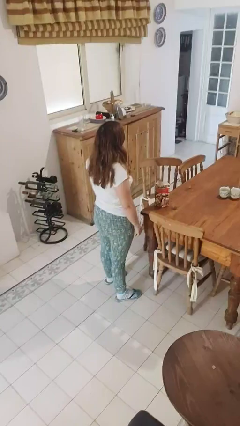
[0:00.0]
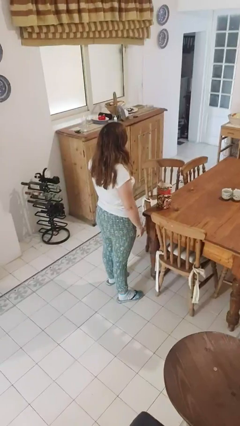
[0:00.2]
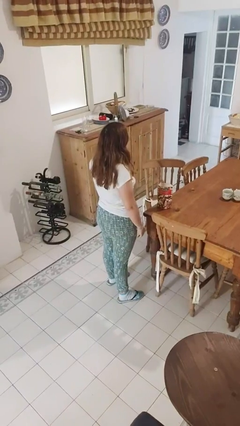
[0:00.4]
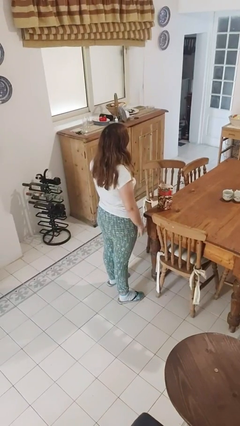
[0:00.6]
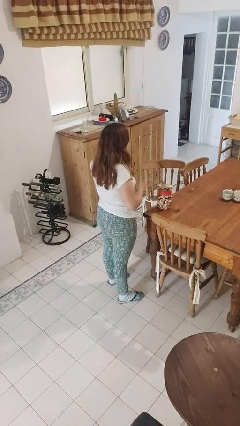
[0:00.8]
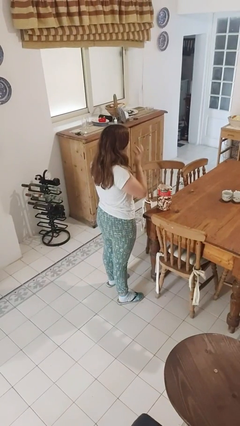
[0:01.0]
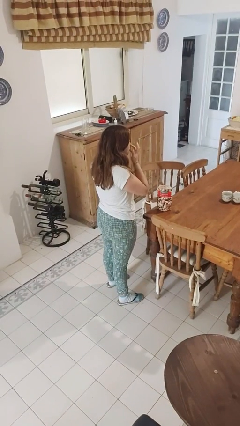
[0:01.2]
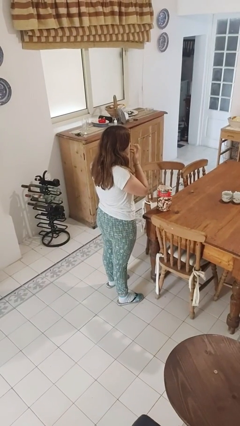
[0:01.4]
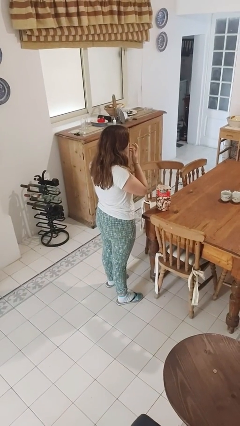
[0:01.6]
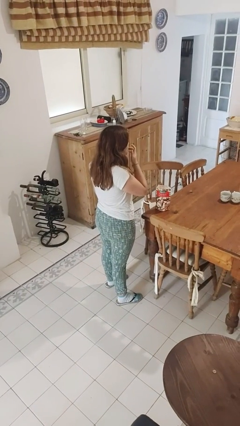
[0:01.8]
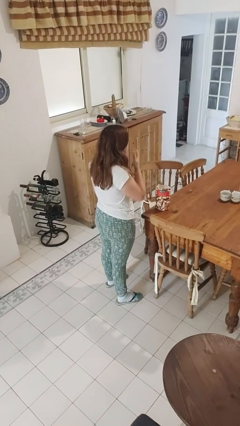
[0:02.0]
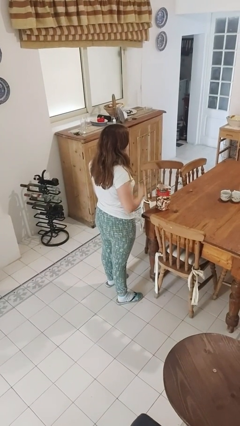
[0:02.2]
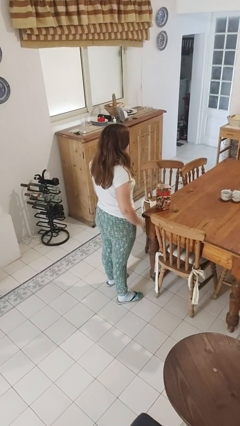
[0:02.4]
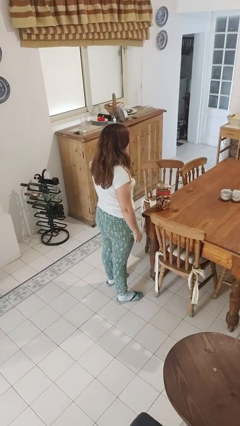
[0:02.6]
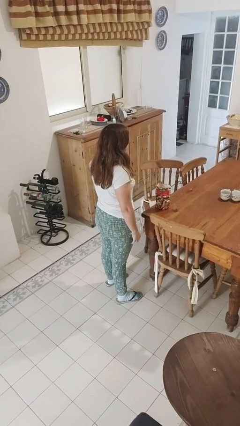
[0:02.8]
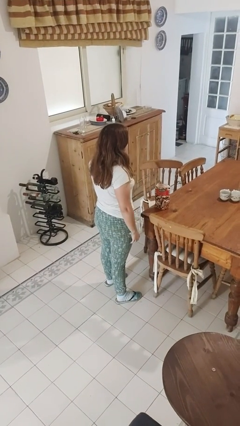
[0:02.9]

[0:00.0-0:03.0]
person licks fingers

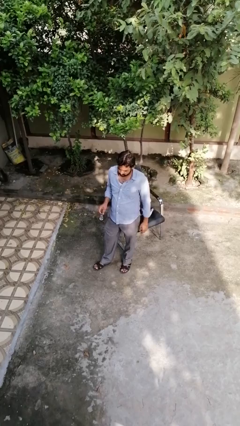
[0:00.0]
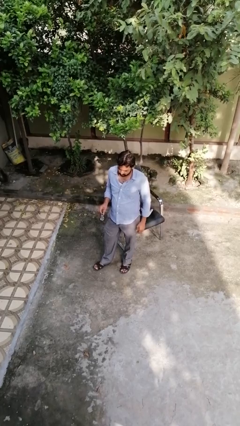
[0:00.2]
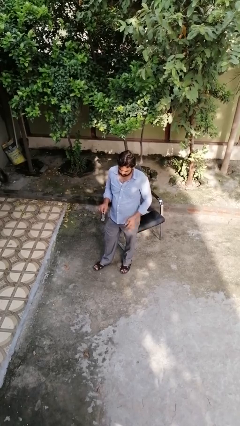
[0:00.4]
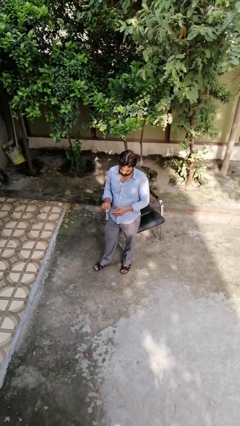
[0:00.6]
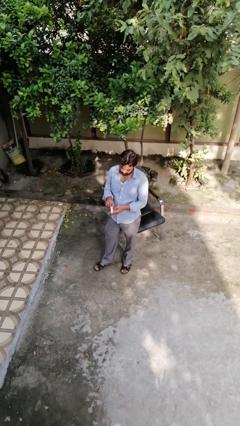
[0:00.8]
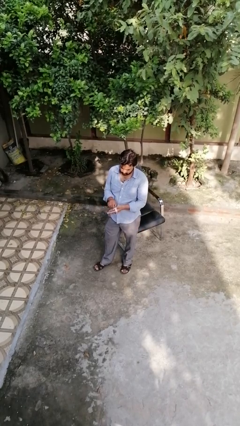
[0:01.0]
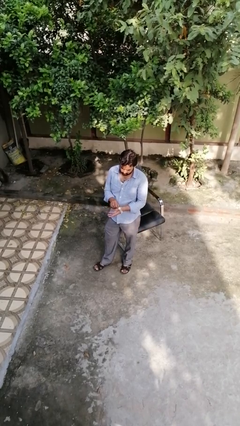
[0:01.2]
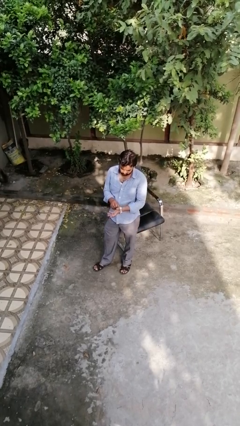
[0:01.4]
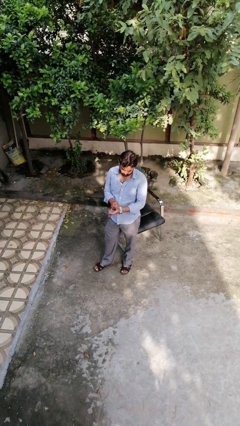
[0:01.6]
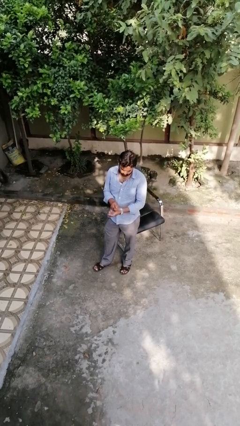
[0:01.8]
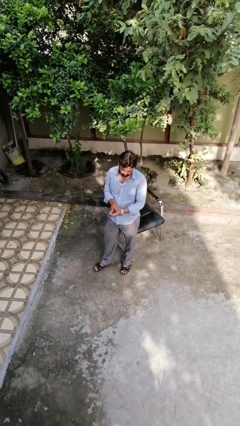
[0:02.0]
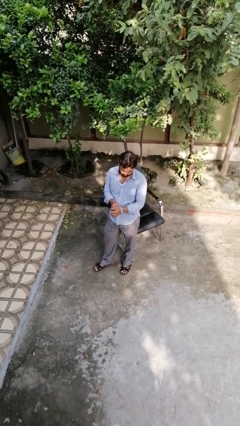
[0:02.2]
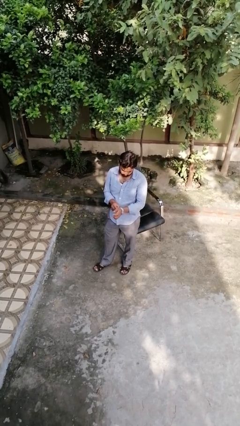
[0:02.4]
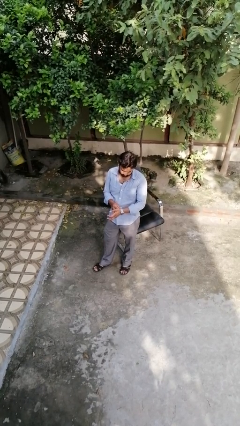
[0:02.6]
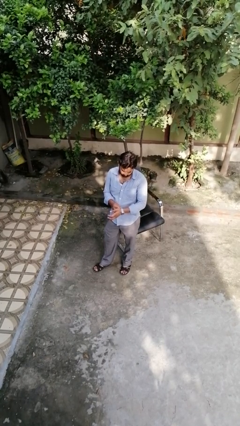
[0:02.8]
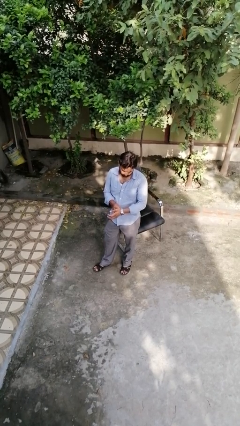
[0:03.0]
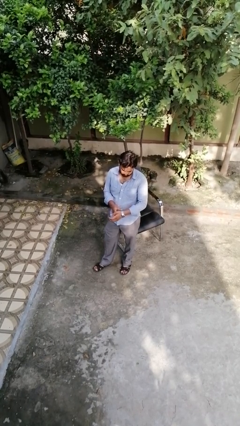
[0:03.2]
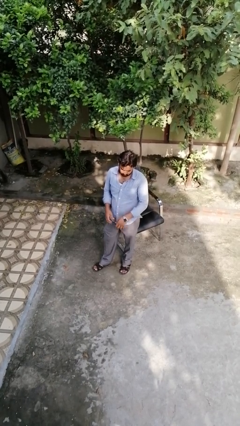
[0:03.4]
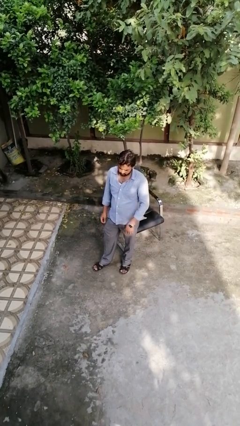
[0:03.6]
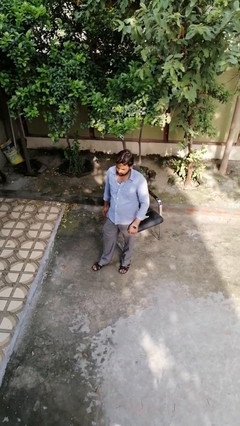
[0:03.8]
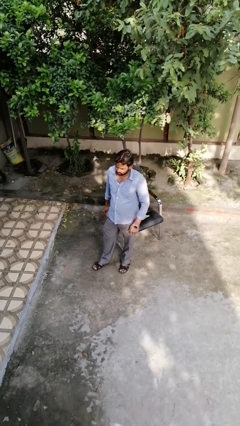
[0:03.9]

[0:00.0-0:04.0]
person puts on wristwatch

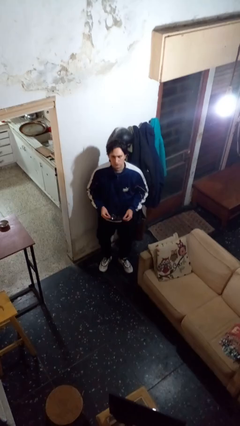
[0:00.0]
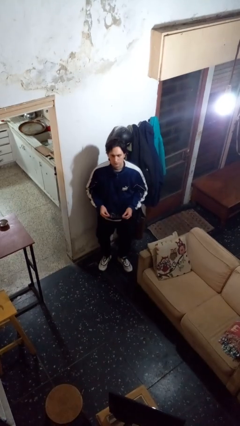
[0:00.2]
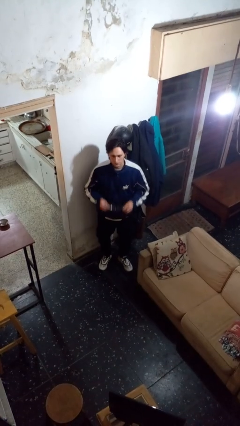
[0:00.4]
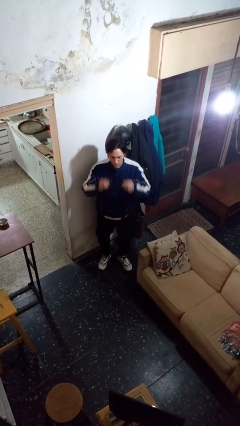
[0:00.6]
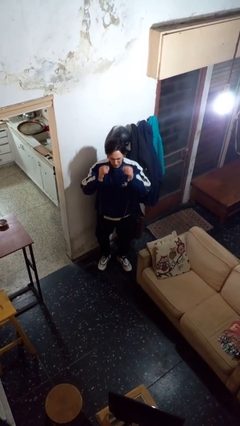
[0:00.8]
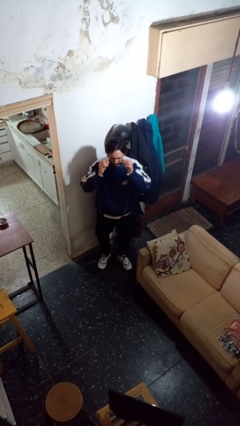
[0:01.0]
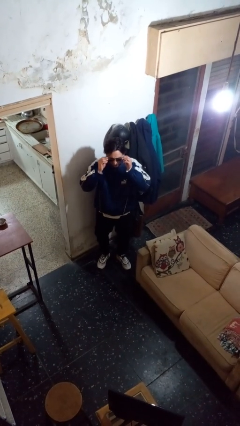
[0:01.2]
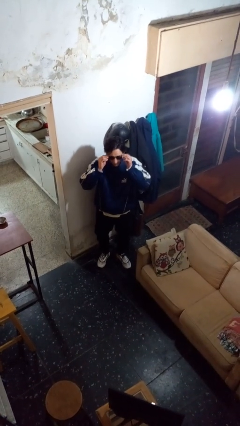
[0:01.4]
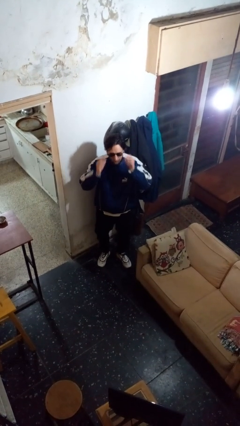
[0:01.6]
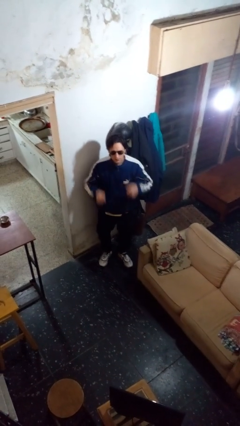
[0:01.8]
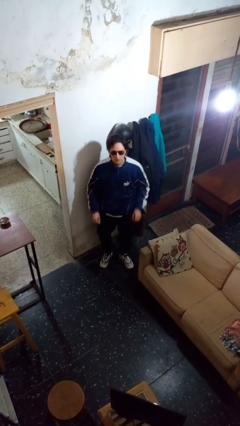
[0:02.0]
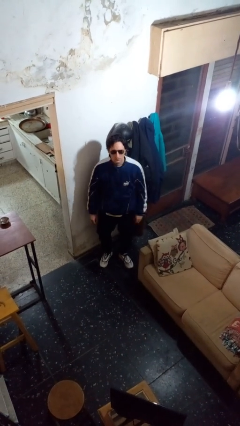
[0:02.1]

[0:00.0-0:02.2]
person puts on sunglasses

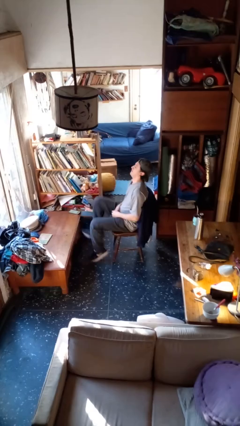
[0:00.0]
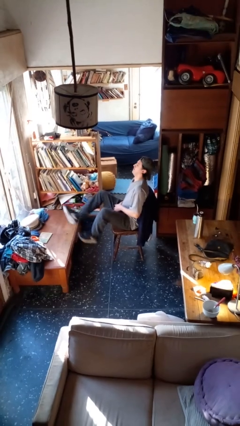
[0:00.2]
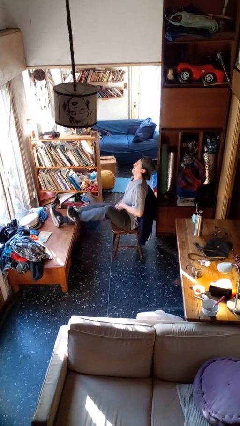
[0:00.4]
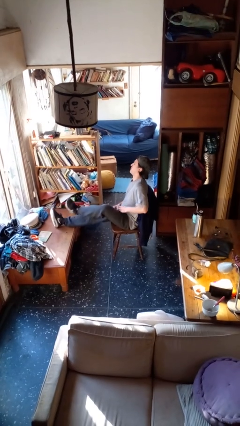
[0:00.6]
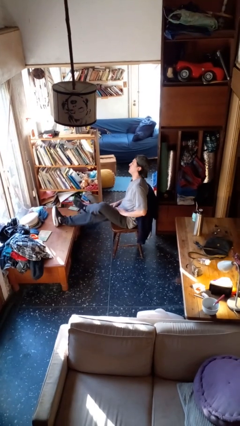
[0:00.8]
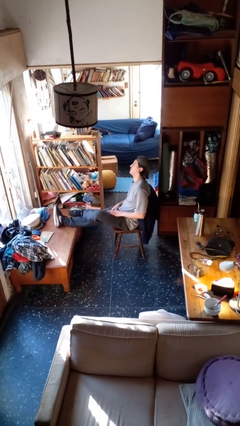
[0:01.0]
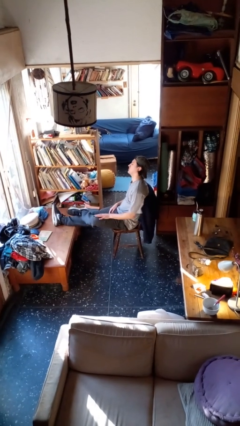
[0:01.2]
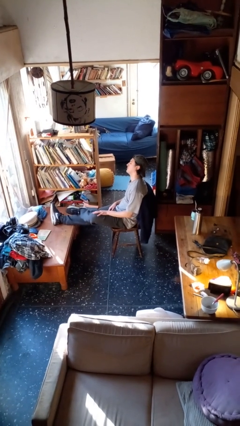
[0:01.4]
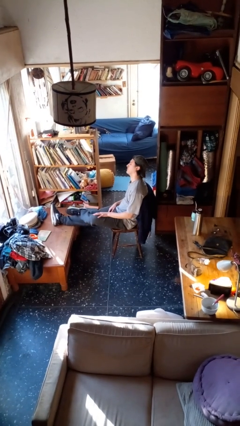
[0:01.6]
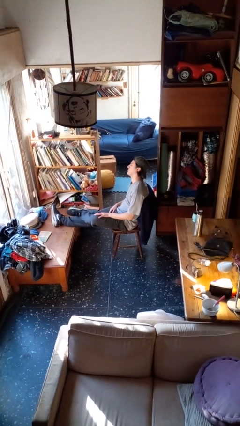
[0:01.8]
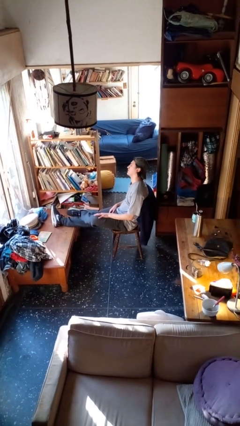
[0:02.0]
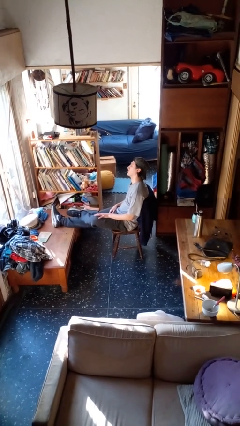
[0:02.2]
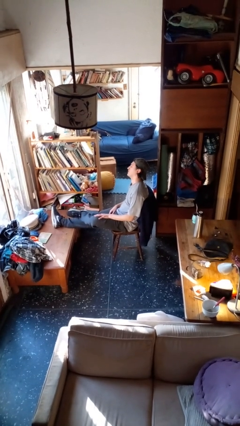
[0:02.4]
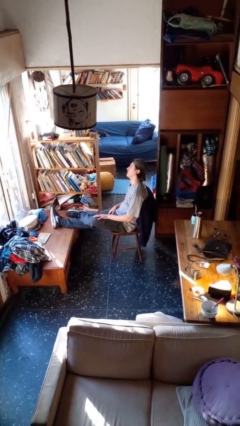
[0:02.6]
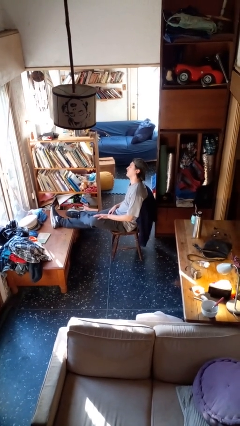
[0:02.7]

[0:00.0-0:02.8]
person puts feet up

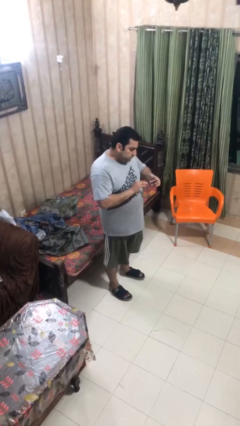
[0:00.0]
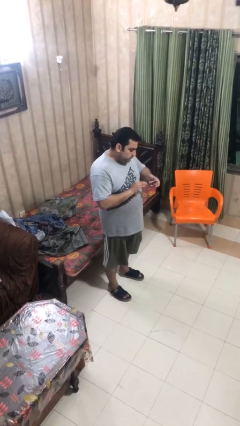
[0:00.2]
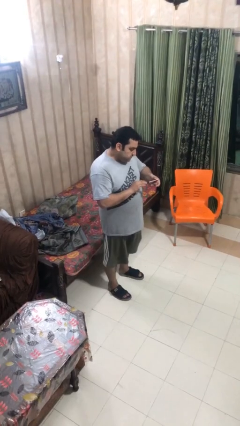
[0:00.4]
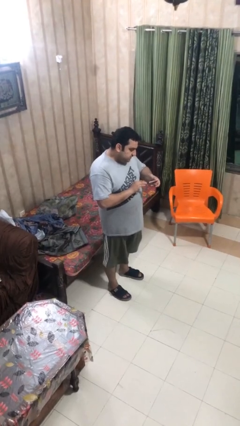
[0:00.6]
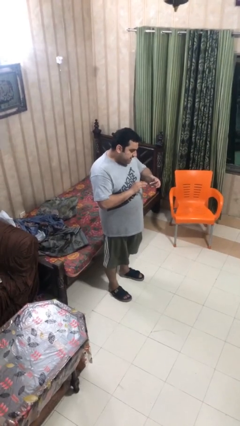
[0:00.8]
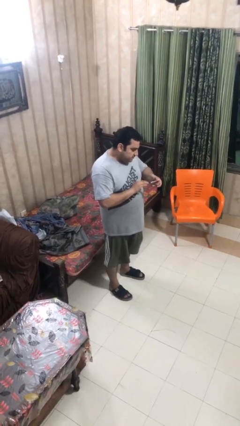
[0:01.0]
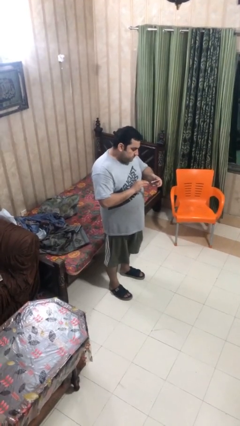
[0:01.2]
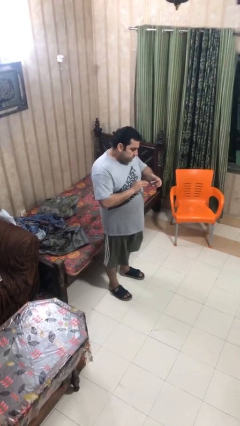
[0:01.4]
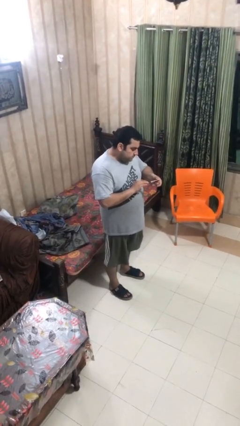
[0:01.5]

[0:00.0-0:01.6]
person clips fingernails

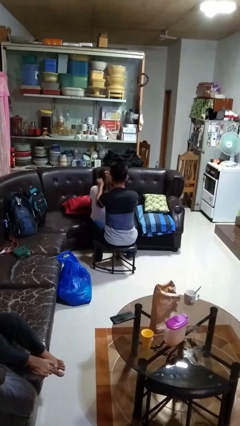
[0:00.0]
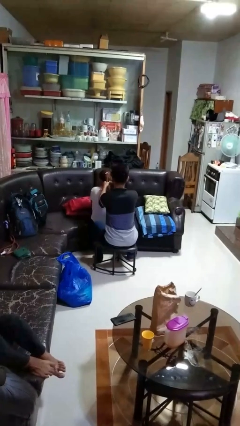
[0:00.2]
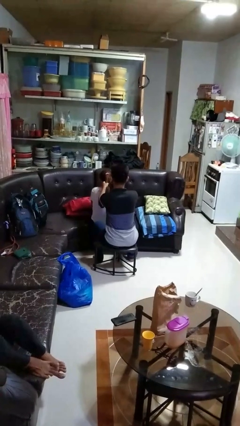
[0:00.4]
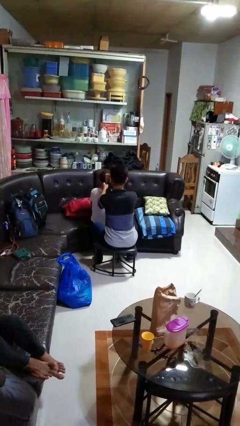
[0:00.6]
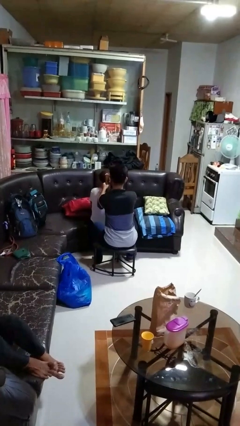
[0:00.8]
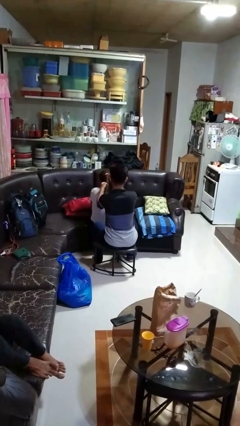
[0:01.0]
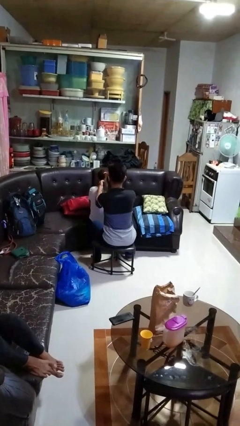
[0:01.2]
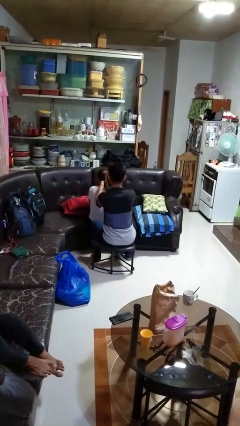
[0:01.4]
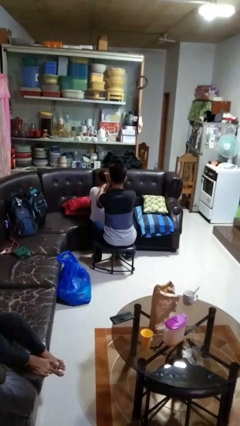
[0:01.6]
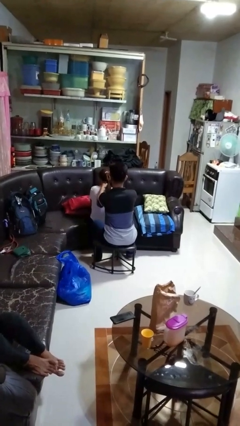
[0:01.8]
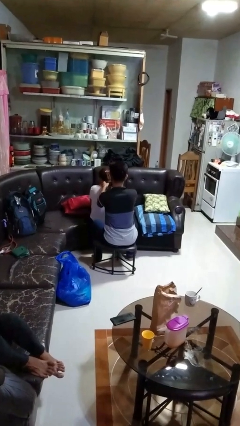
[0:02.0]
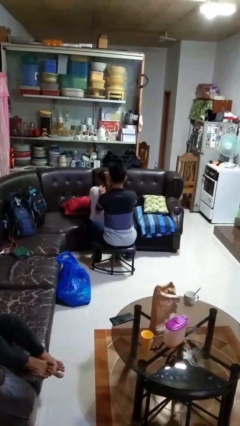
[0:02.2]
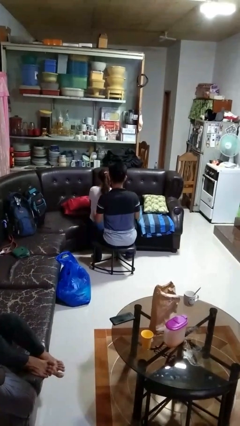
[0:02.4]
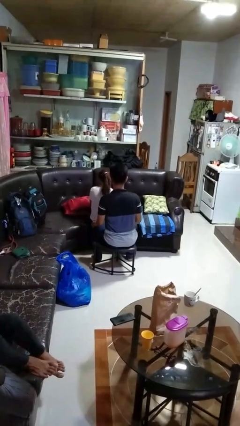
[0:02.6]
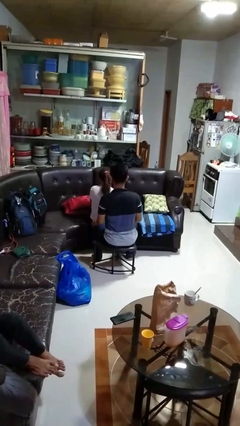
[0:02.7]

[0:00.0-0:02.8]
person braids hair of person

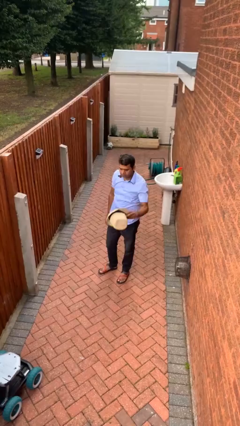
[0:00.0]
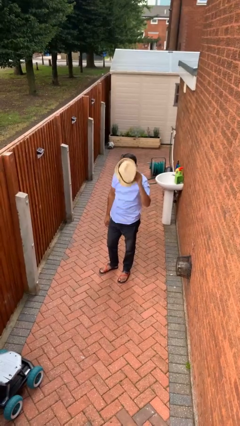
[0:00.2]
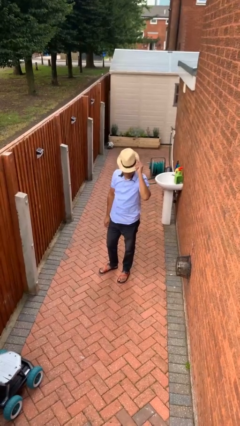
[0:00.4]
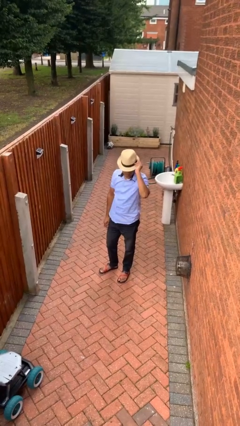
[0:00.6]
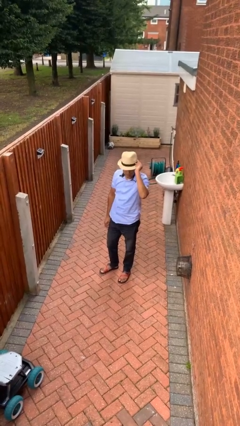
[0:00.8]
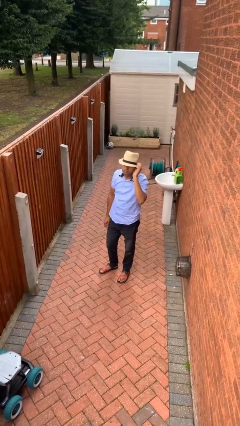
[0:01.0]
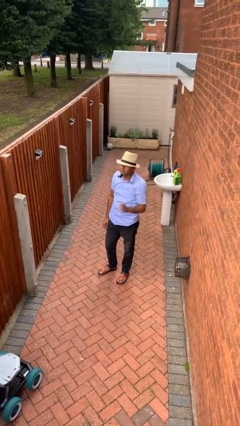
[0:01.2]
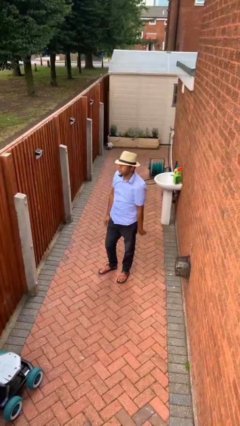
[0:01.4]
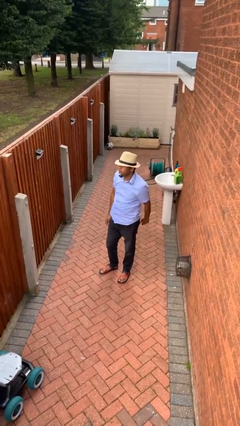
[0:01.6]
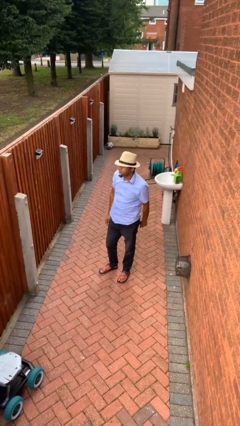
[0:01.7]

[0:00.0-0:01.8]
person puts on hat
